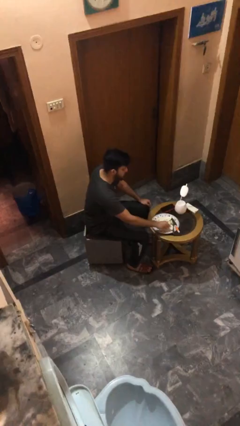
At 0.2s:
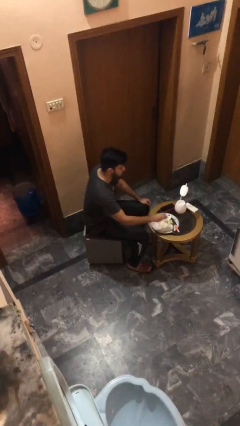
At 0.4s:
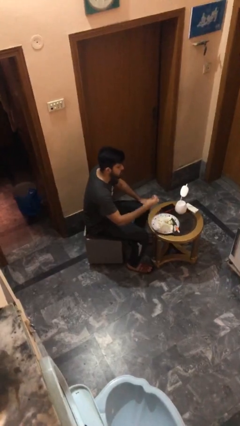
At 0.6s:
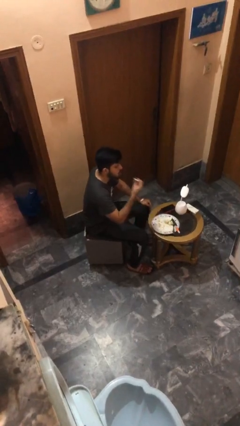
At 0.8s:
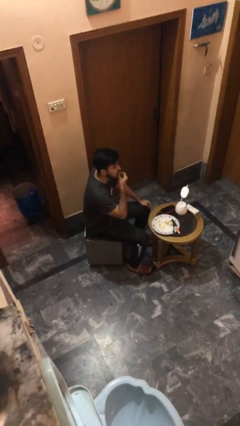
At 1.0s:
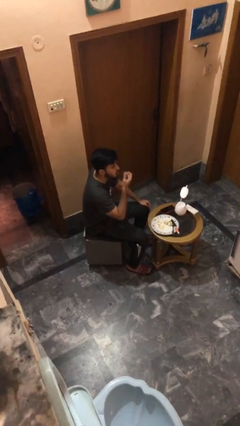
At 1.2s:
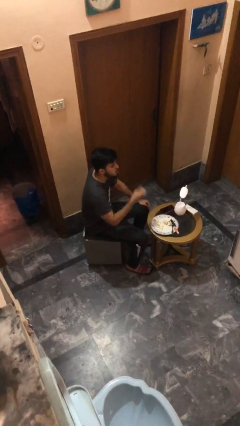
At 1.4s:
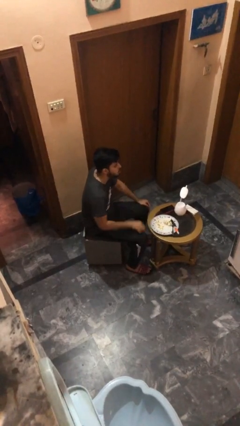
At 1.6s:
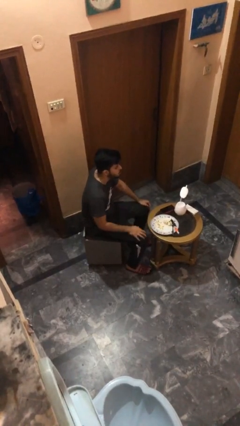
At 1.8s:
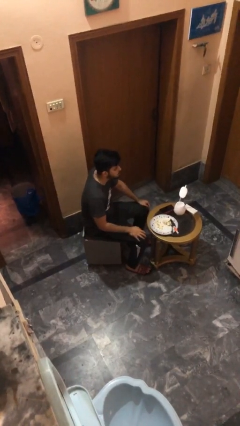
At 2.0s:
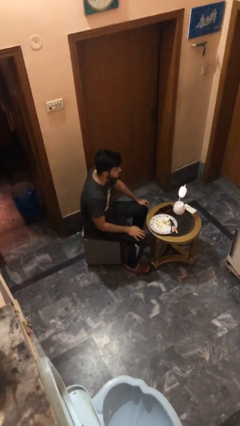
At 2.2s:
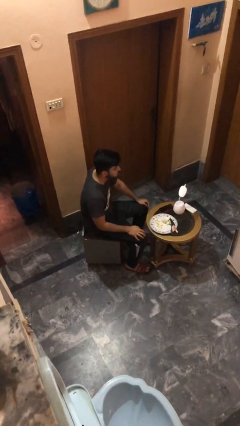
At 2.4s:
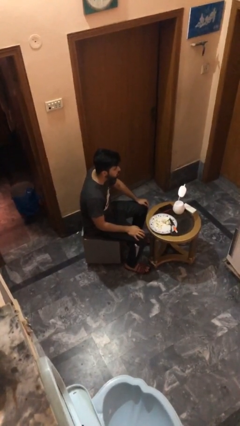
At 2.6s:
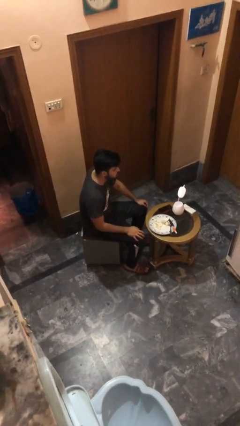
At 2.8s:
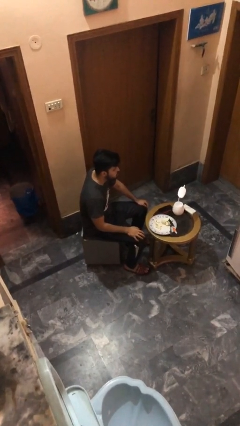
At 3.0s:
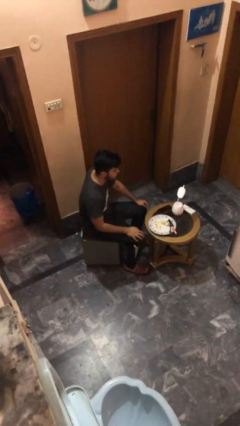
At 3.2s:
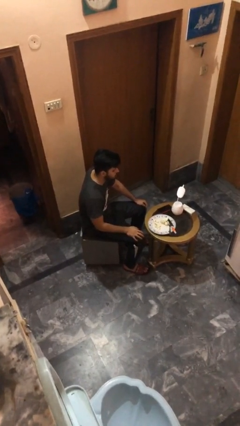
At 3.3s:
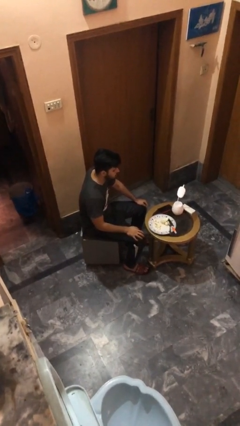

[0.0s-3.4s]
person eats with hands

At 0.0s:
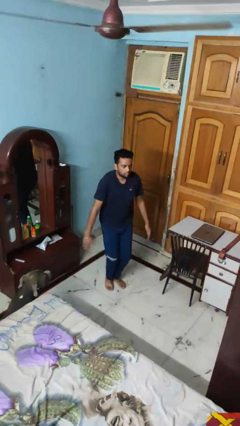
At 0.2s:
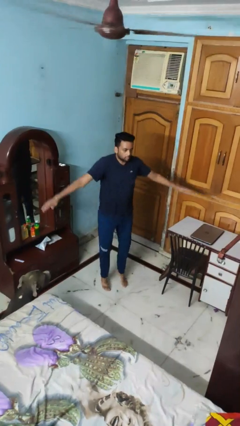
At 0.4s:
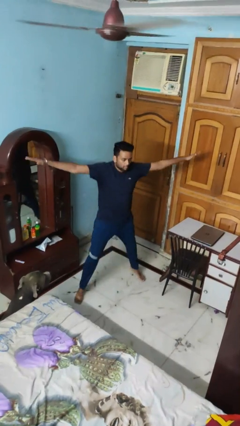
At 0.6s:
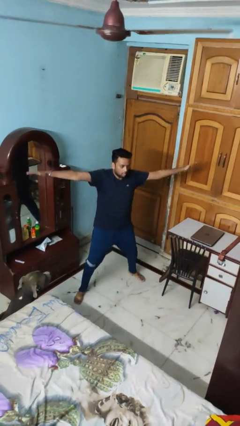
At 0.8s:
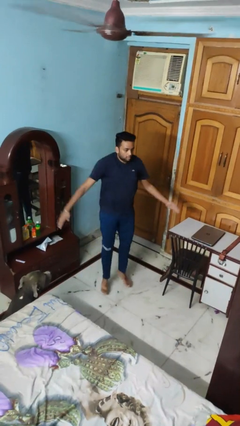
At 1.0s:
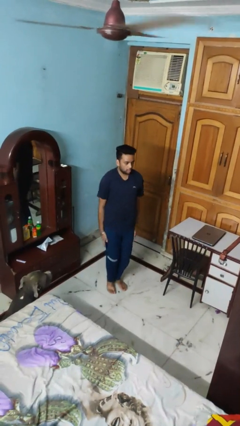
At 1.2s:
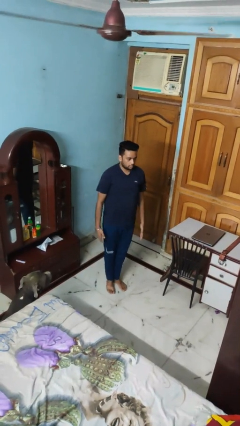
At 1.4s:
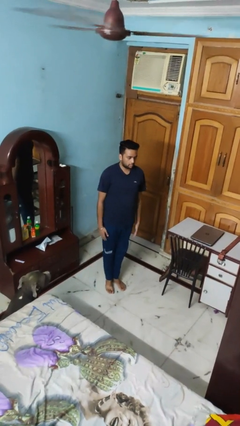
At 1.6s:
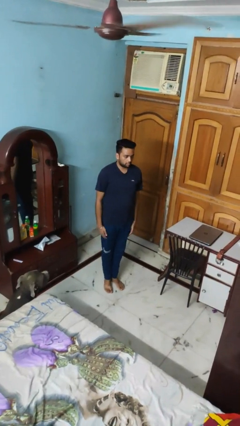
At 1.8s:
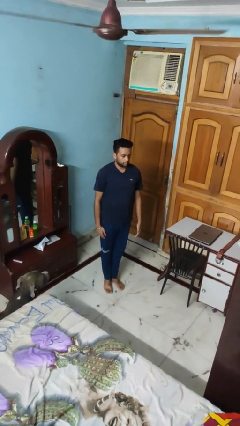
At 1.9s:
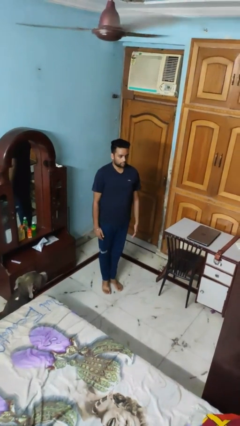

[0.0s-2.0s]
person exercises with jumping jacks

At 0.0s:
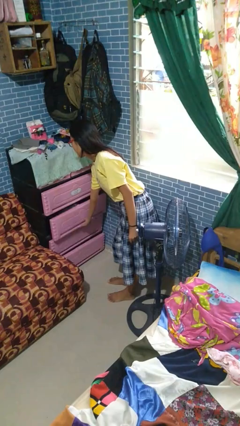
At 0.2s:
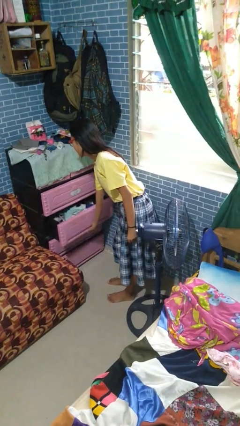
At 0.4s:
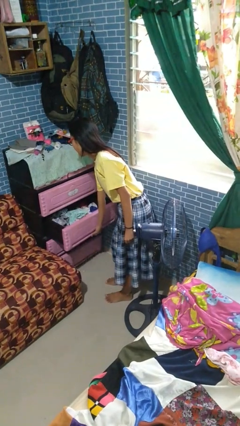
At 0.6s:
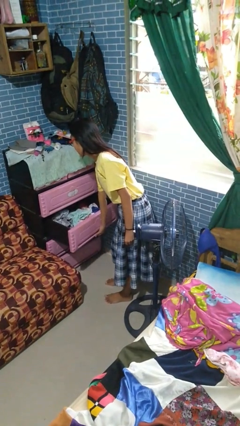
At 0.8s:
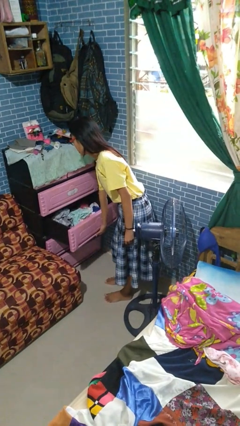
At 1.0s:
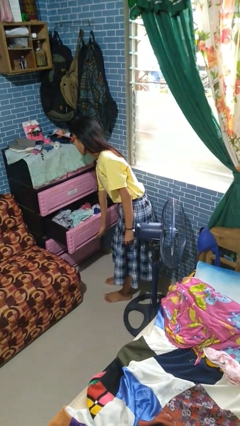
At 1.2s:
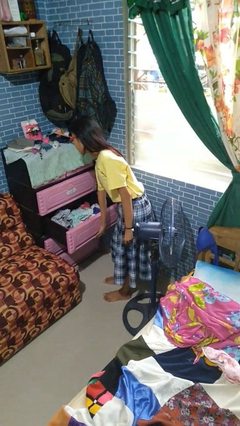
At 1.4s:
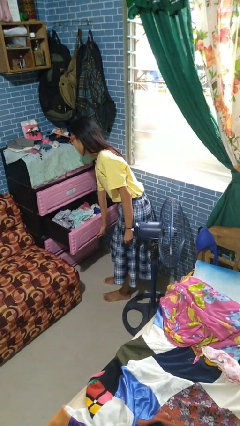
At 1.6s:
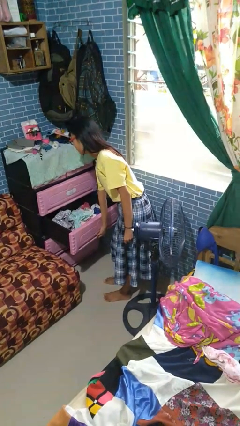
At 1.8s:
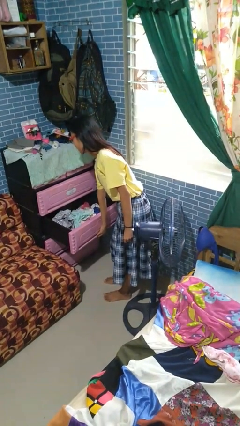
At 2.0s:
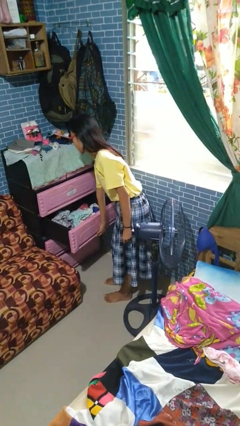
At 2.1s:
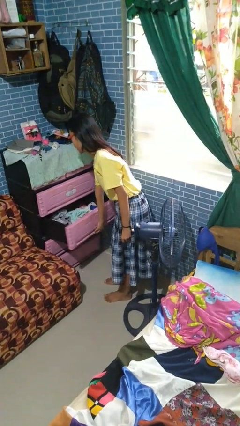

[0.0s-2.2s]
person opens dresser drawer

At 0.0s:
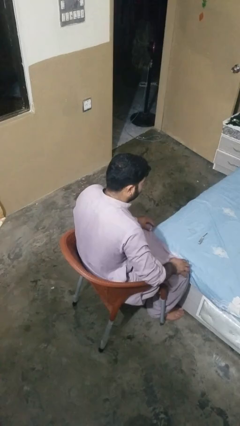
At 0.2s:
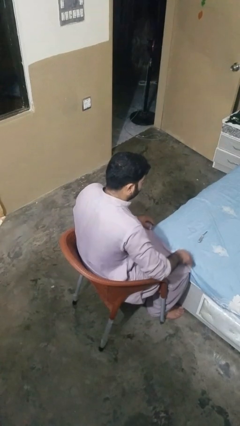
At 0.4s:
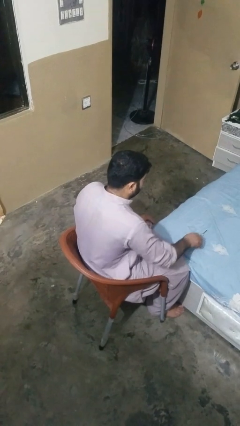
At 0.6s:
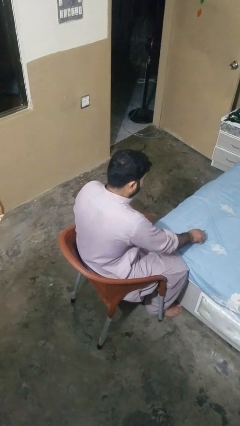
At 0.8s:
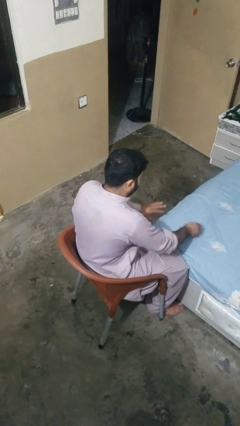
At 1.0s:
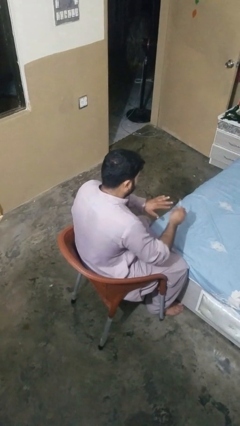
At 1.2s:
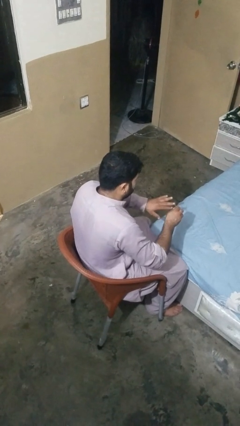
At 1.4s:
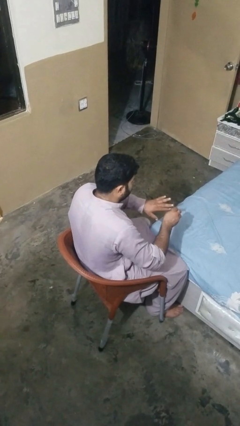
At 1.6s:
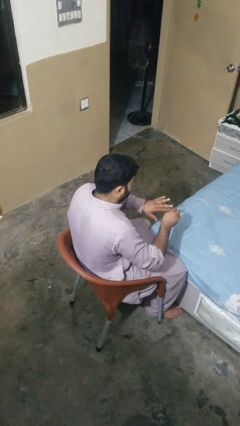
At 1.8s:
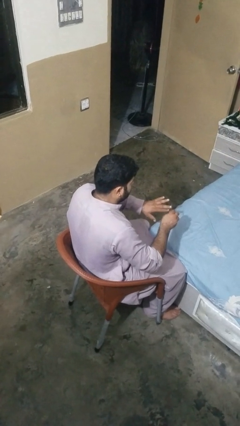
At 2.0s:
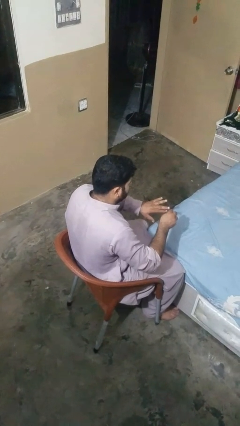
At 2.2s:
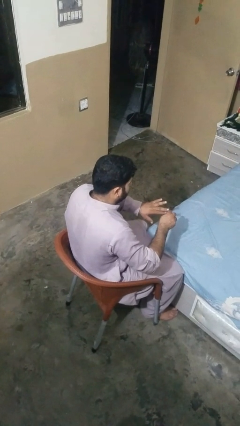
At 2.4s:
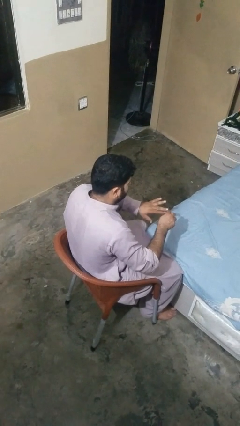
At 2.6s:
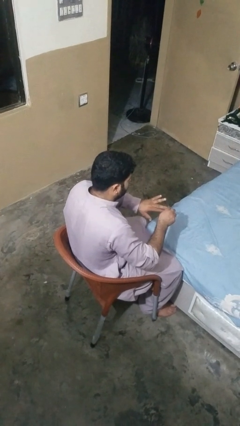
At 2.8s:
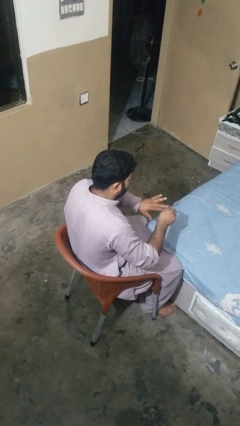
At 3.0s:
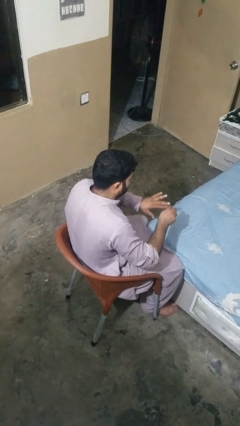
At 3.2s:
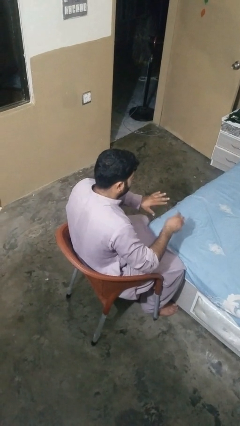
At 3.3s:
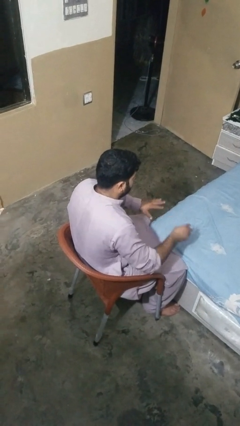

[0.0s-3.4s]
person files fingernails

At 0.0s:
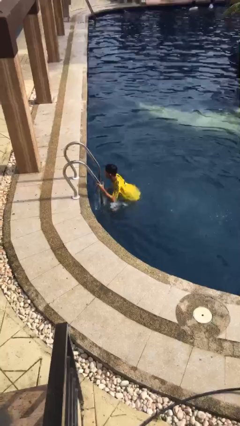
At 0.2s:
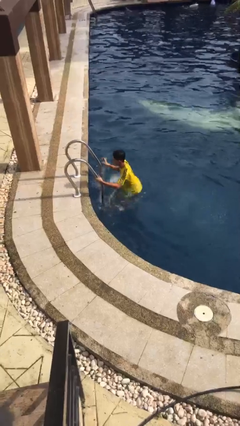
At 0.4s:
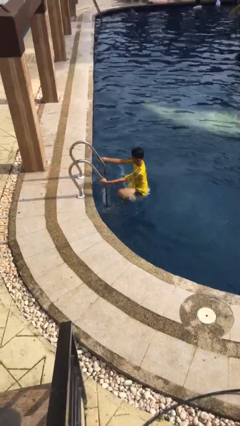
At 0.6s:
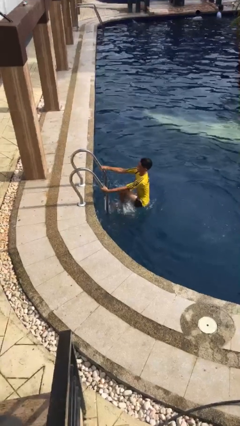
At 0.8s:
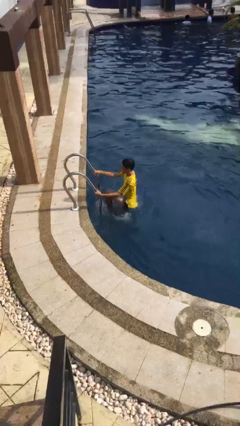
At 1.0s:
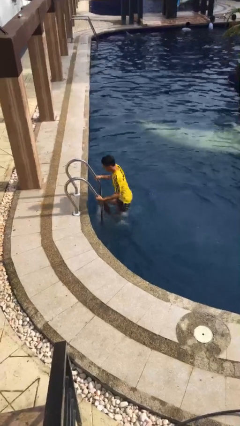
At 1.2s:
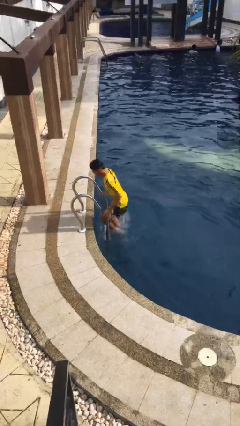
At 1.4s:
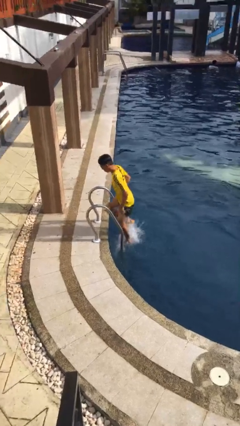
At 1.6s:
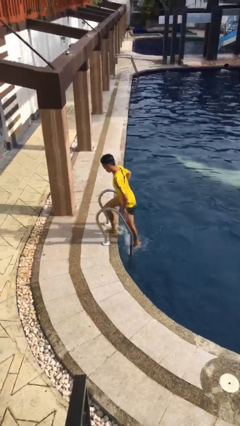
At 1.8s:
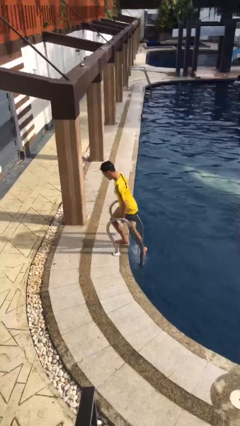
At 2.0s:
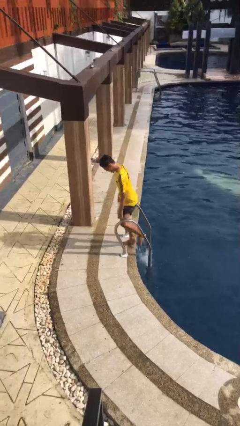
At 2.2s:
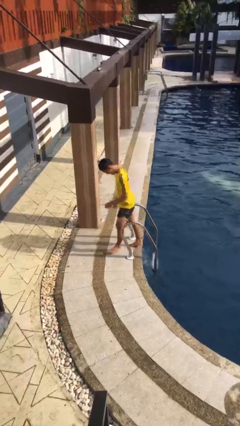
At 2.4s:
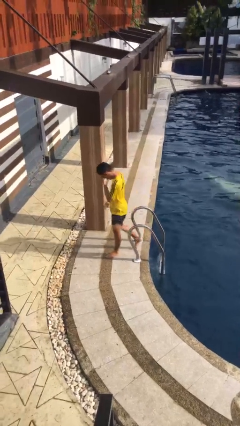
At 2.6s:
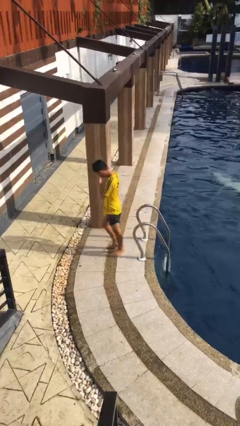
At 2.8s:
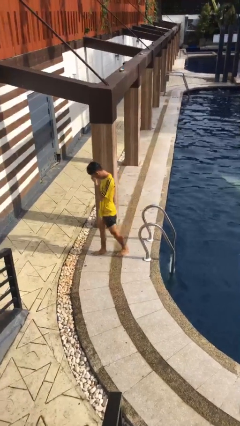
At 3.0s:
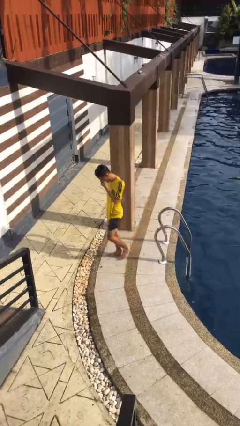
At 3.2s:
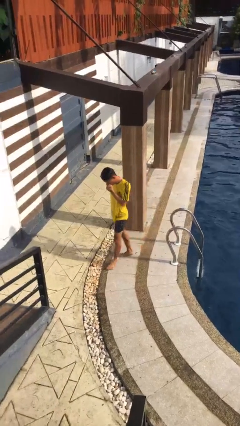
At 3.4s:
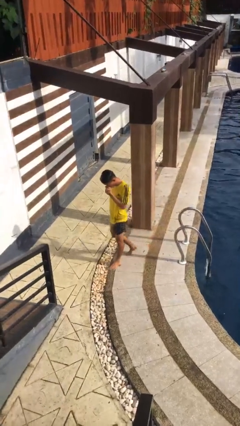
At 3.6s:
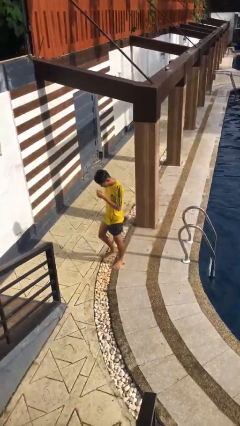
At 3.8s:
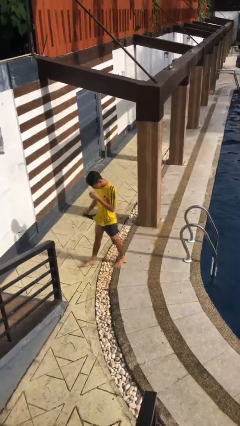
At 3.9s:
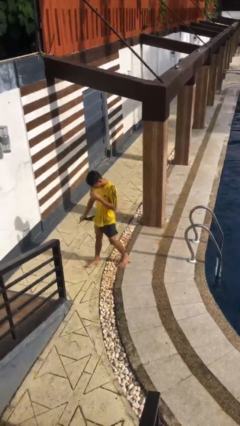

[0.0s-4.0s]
person exits pool

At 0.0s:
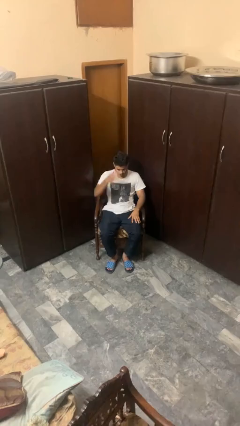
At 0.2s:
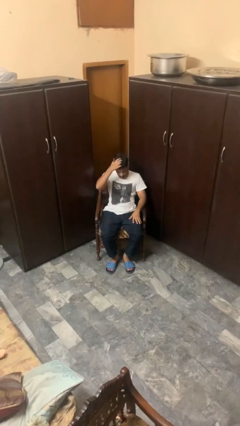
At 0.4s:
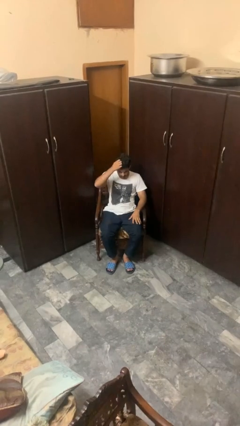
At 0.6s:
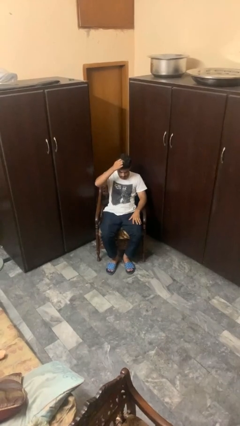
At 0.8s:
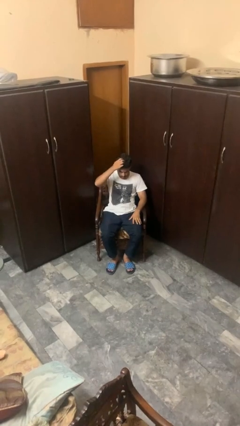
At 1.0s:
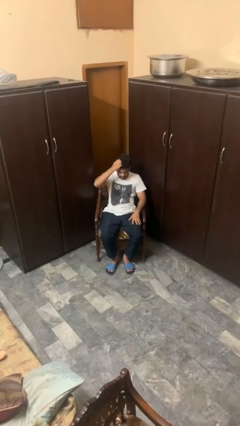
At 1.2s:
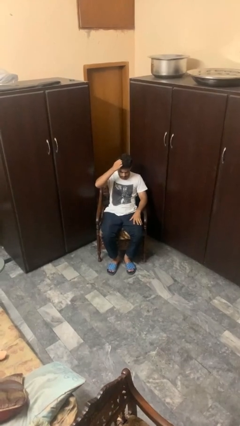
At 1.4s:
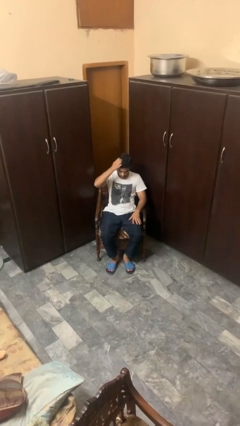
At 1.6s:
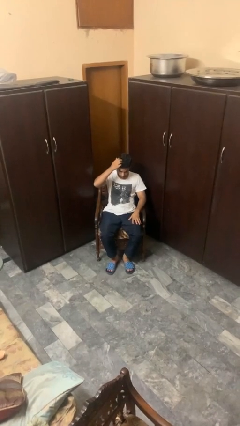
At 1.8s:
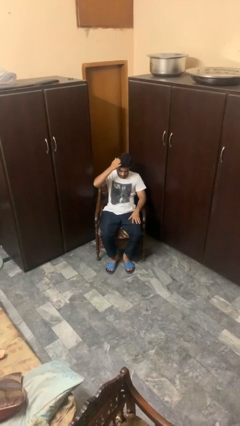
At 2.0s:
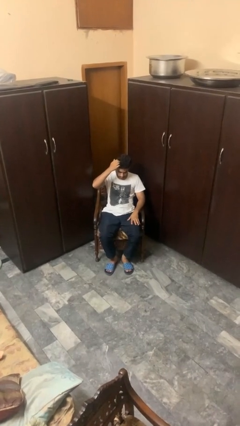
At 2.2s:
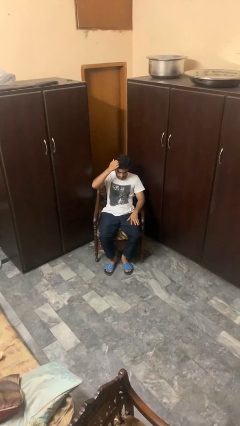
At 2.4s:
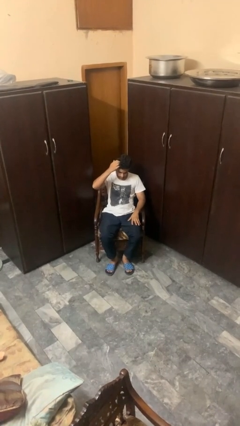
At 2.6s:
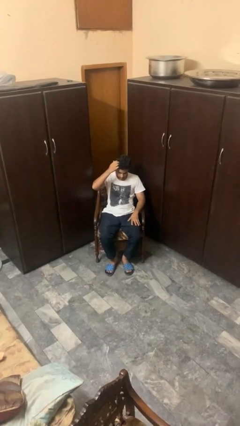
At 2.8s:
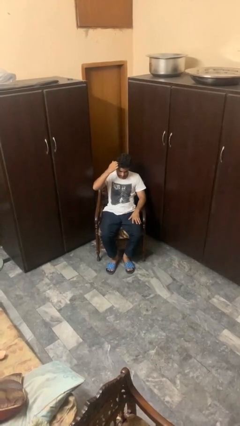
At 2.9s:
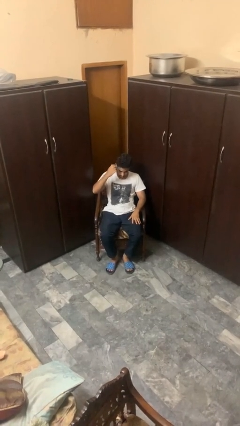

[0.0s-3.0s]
person scratches face
